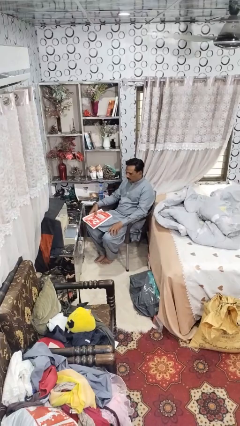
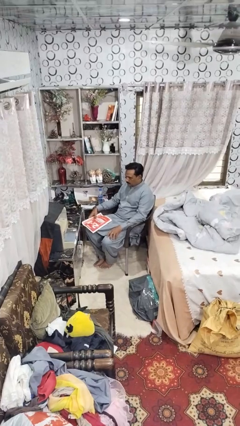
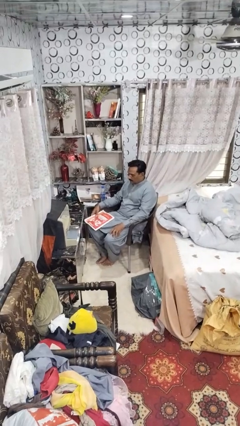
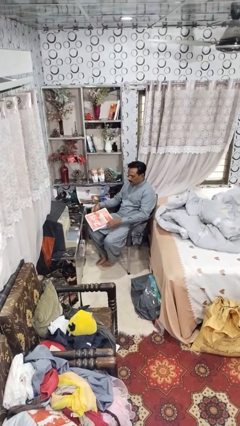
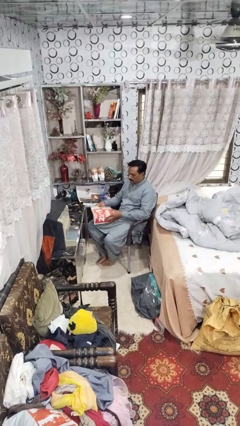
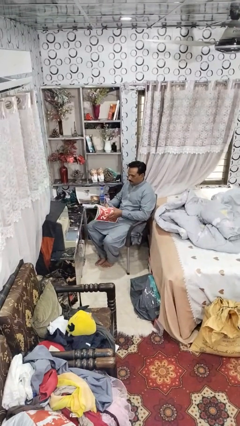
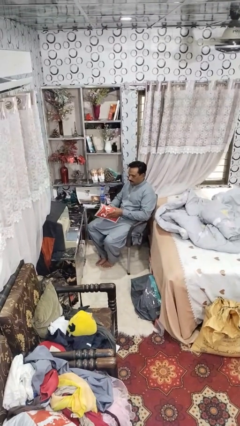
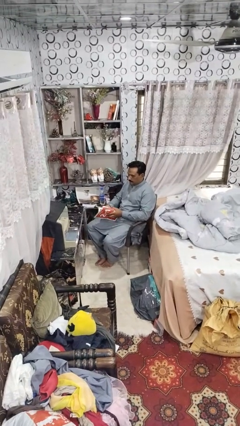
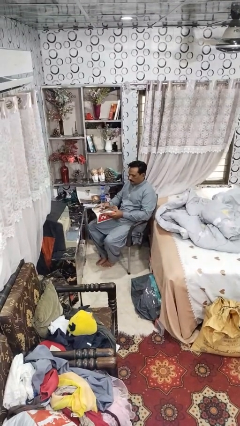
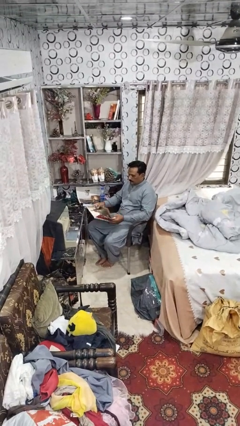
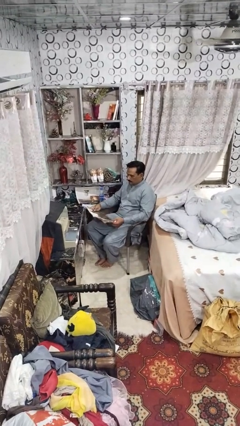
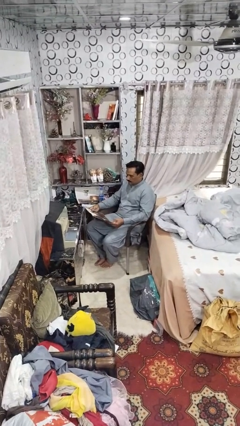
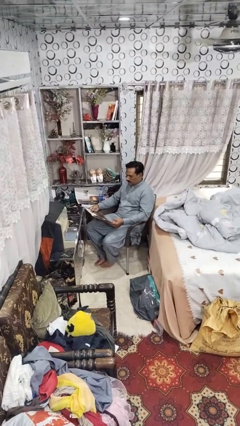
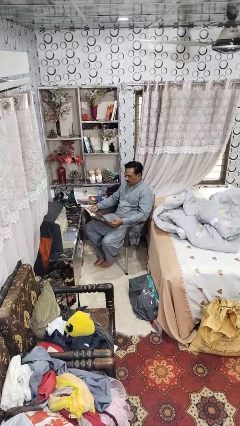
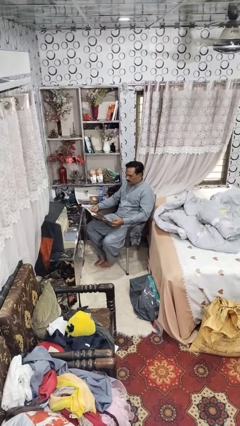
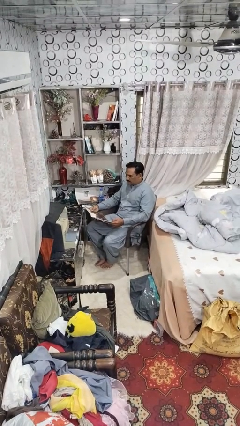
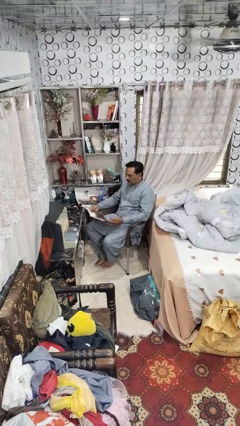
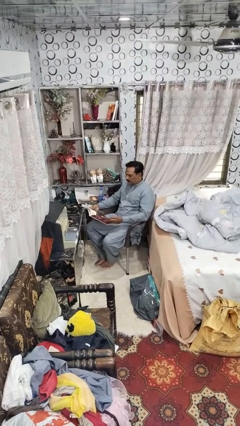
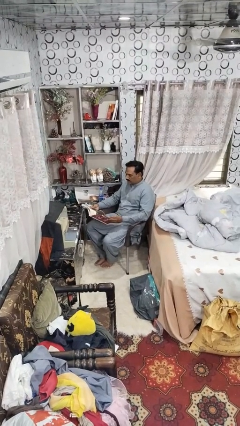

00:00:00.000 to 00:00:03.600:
person reads magazine

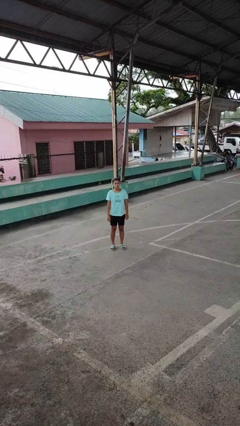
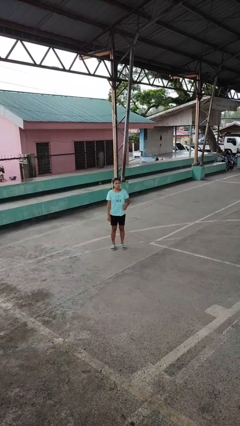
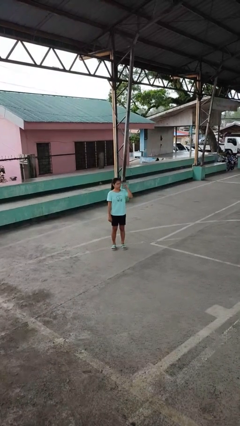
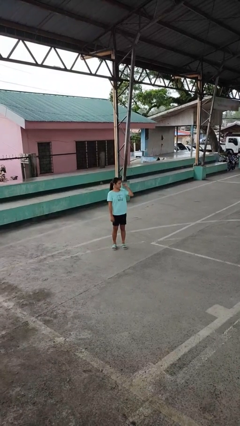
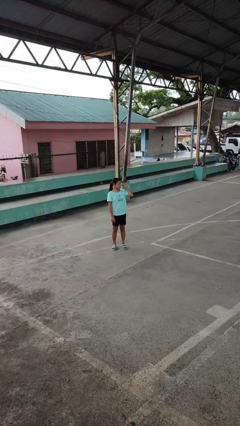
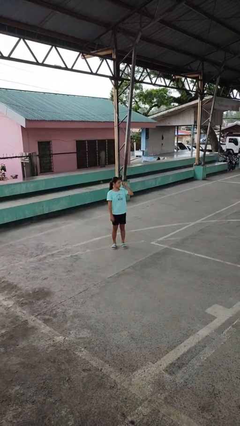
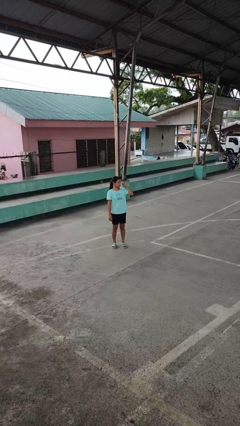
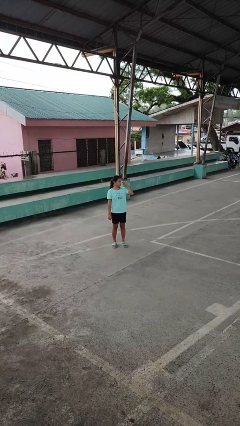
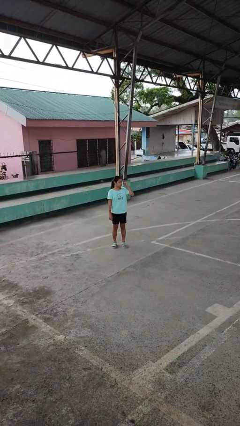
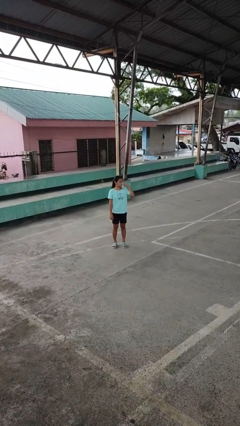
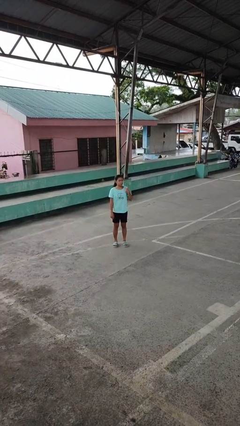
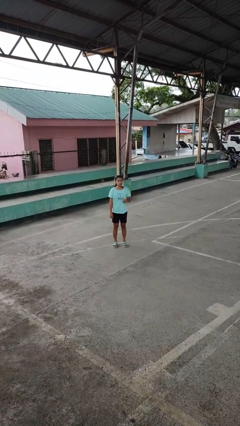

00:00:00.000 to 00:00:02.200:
person gestures behind me

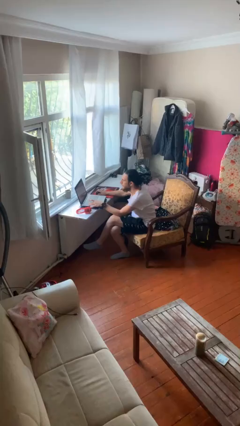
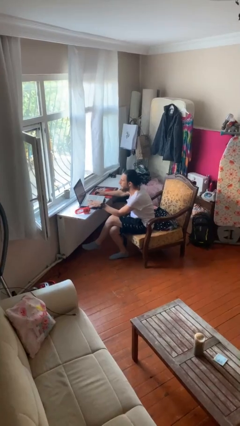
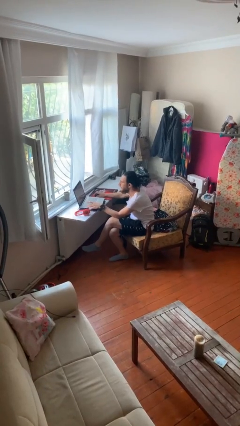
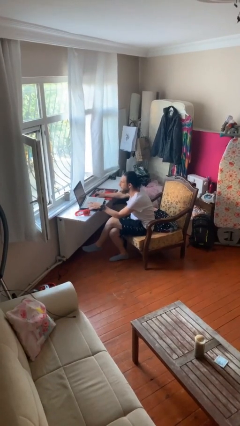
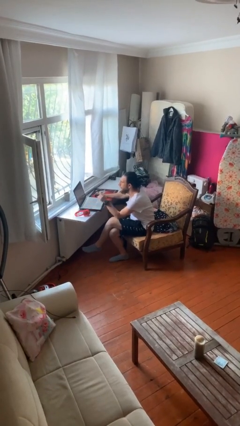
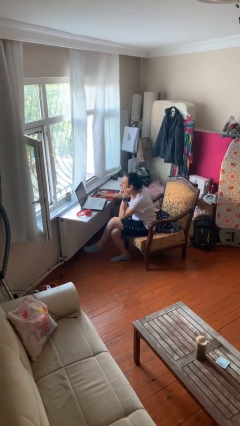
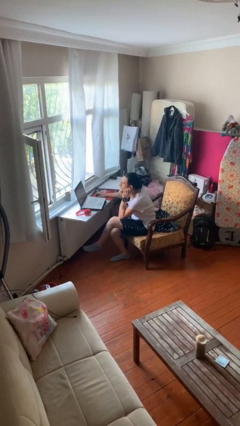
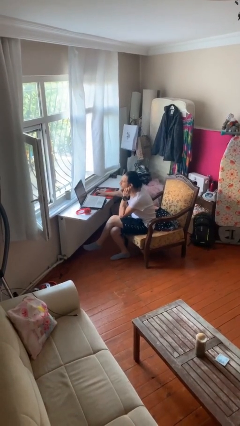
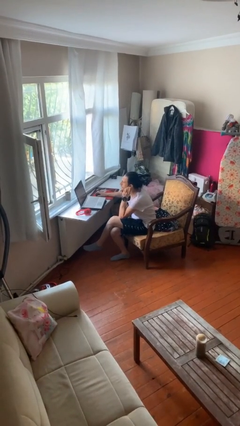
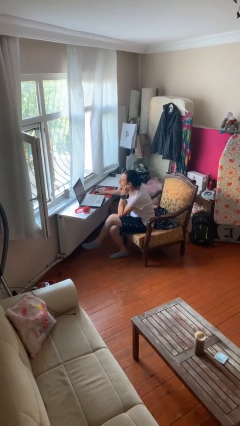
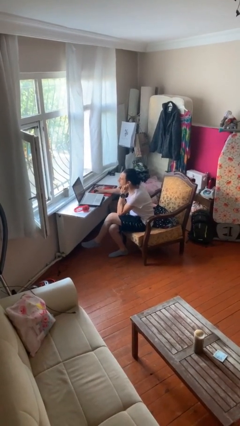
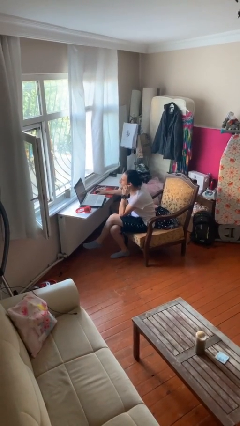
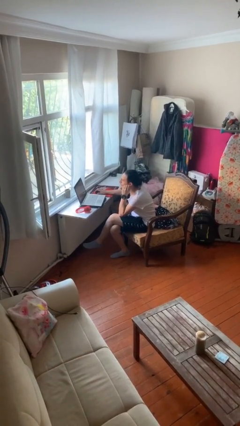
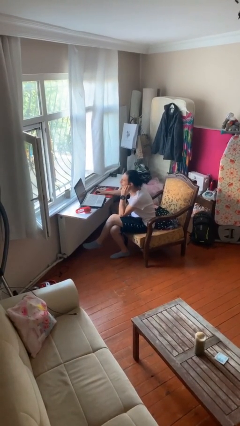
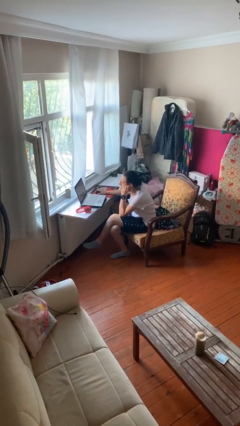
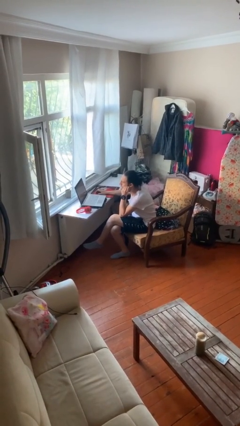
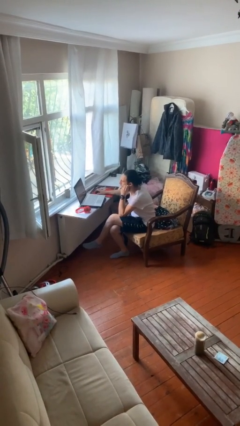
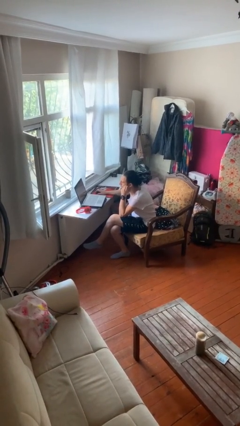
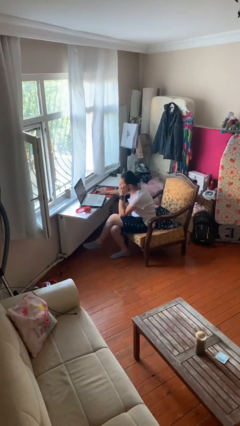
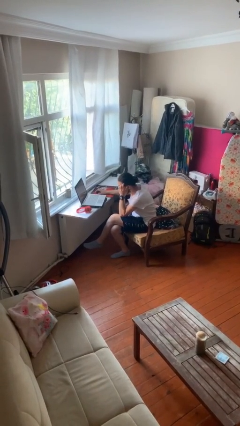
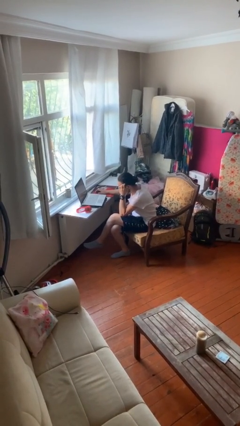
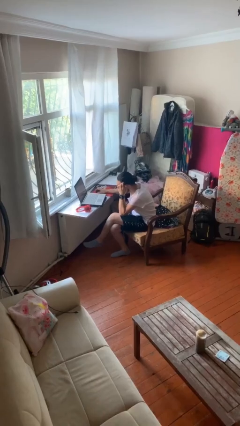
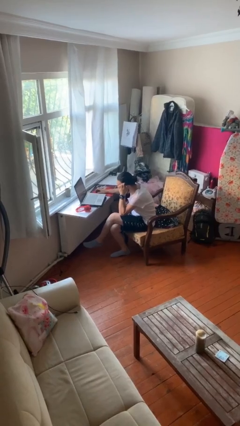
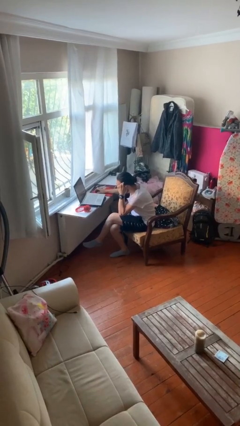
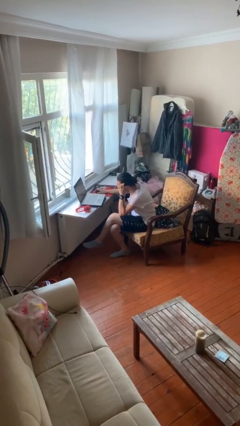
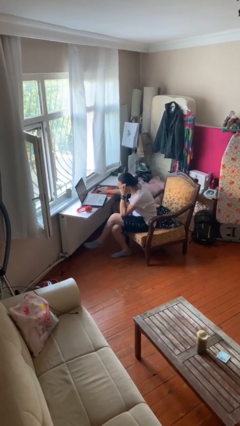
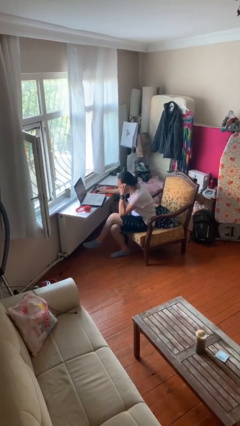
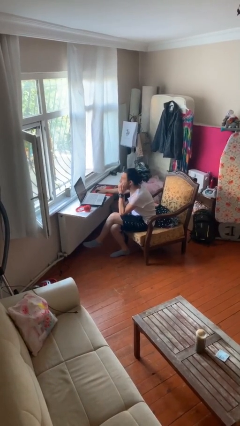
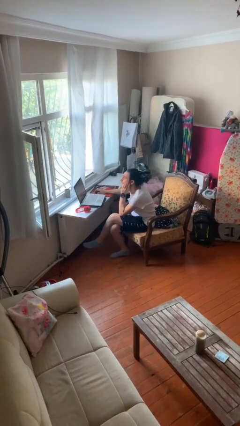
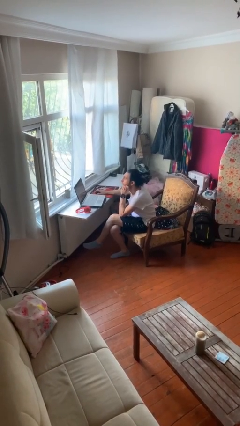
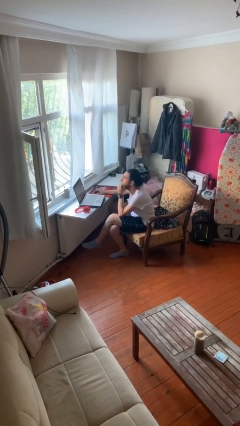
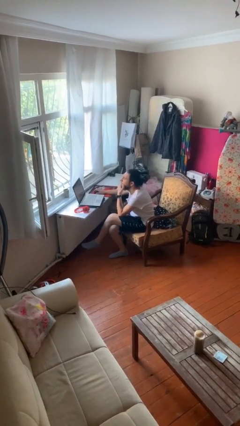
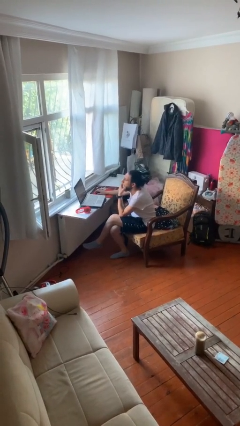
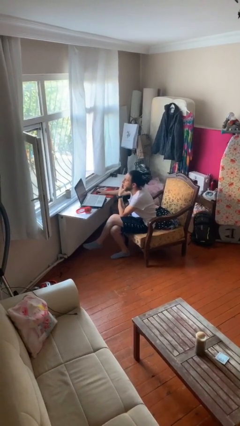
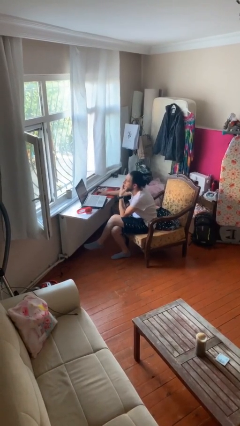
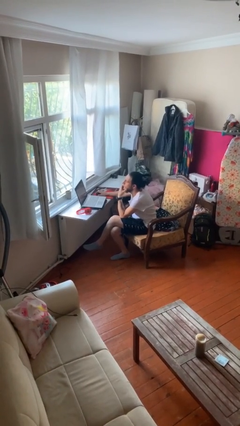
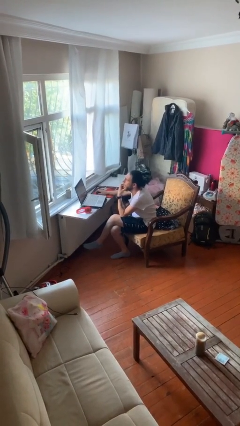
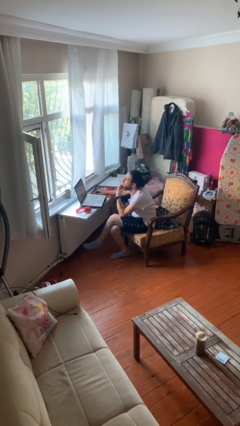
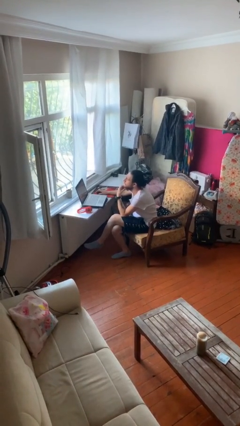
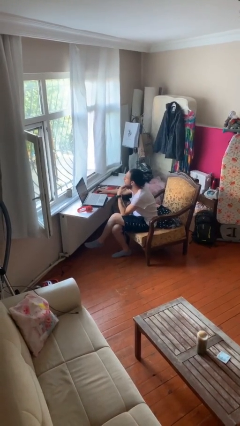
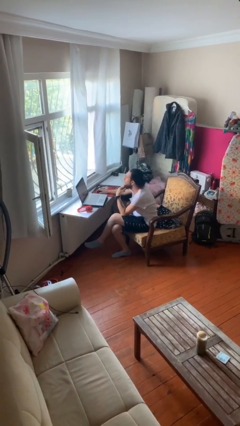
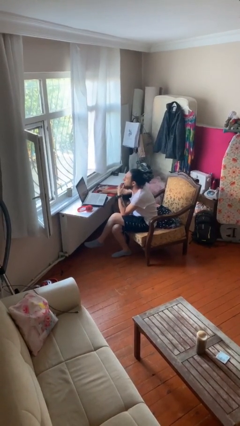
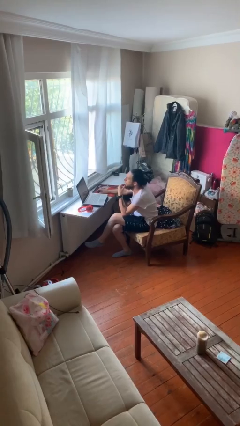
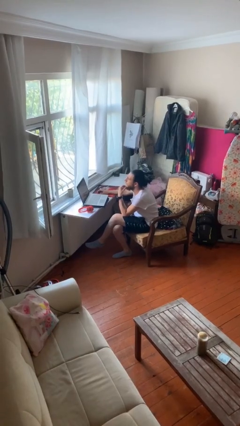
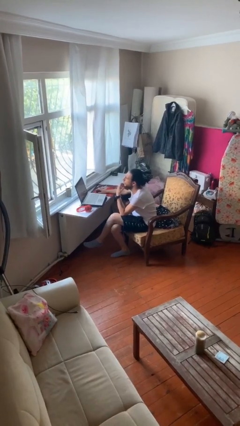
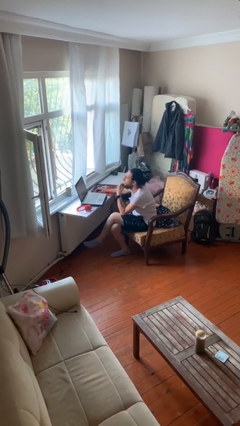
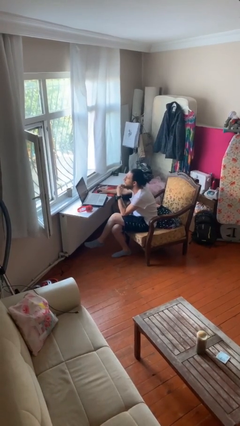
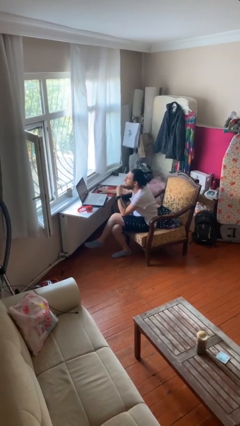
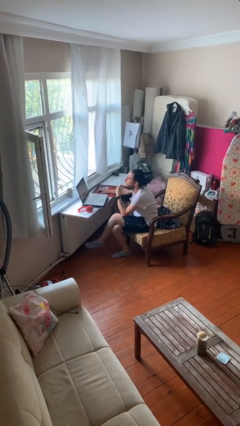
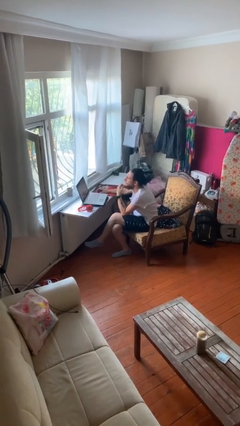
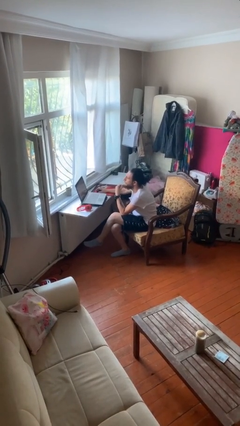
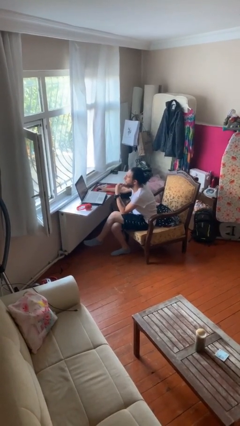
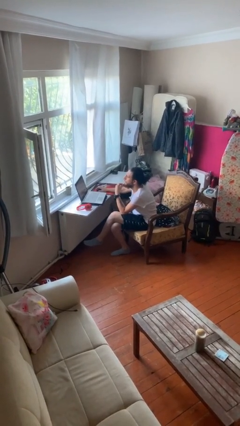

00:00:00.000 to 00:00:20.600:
person interacts with laptop

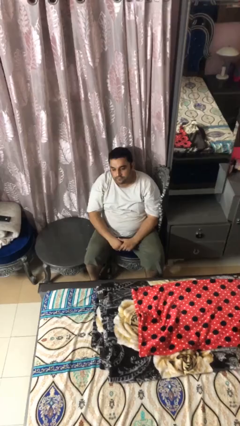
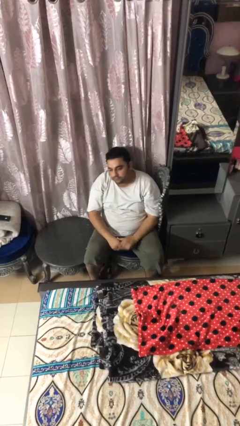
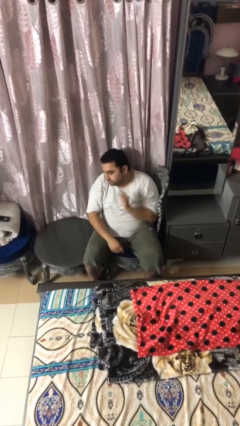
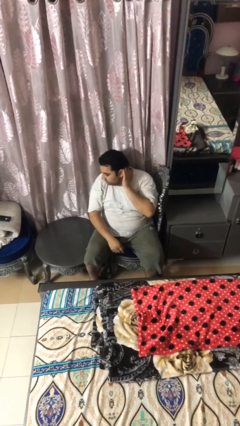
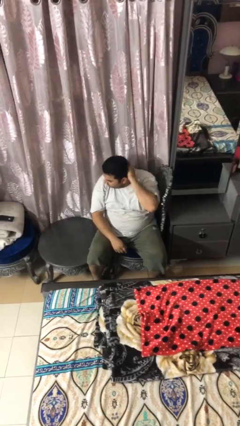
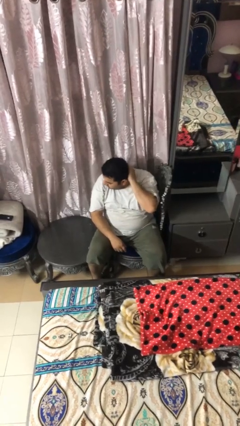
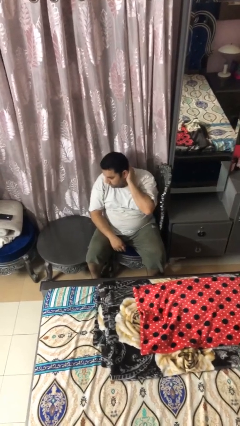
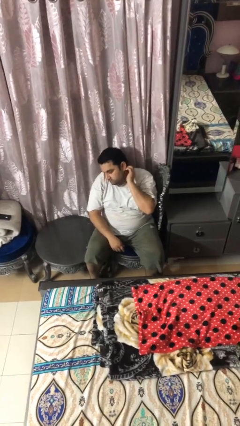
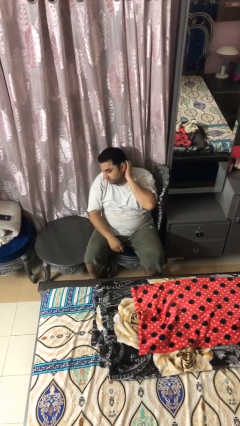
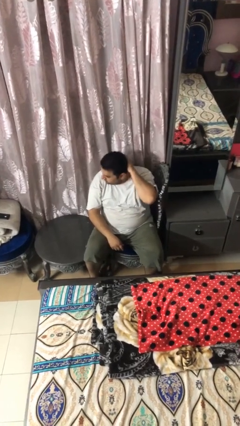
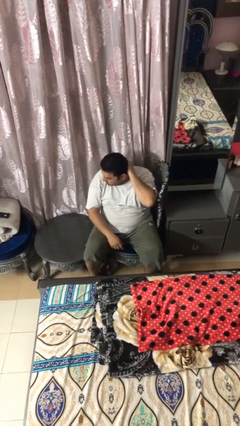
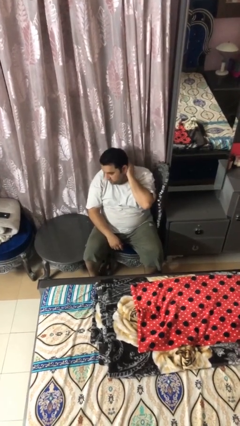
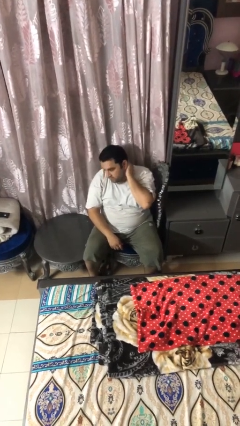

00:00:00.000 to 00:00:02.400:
person strokes hair
